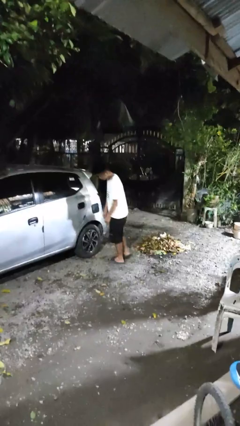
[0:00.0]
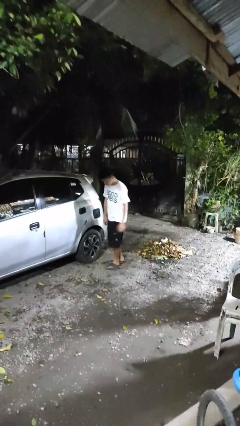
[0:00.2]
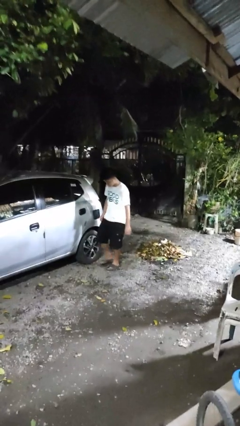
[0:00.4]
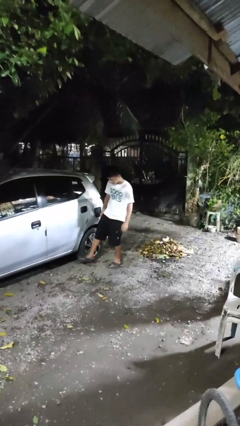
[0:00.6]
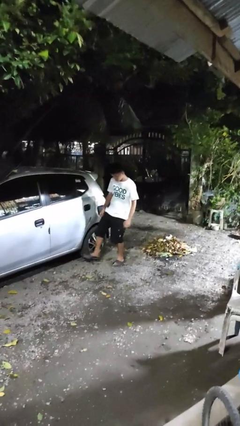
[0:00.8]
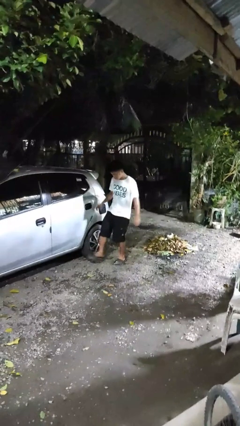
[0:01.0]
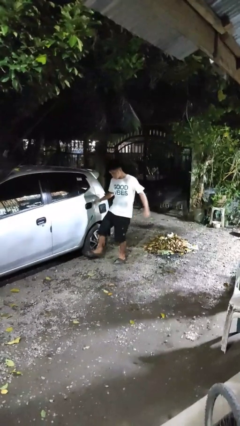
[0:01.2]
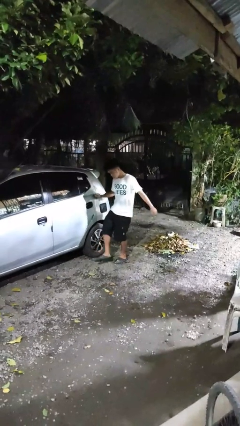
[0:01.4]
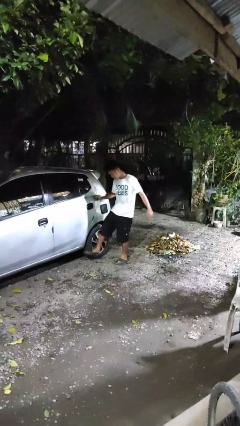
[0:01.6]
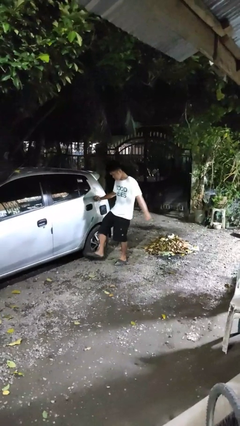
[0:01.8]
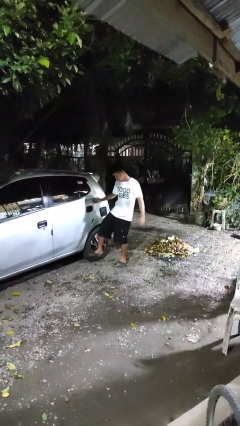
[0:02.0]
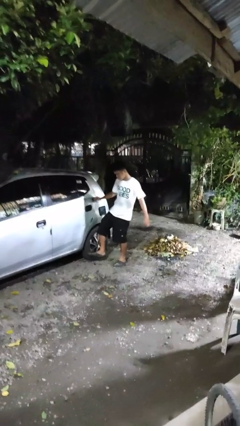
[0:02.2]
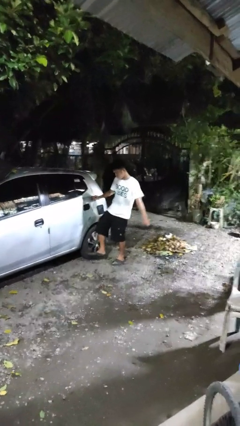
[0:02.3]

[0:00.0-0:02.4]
person kicks car tires

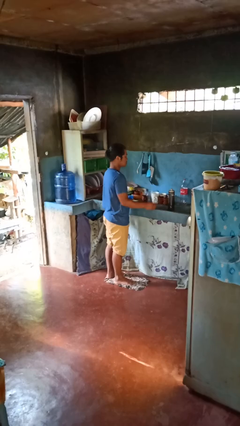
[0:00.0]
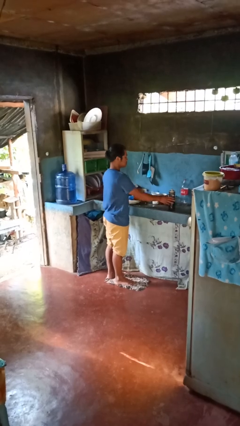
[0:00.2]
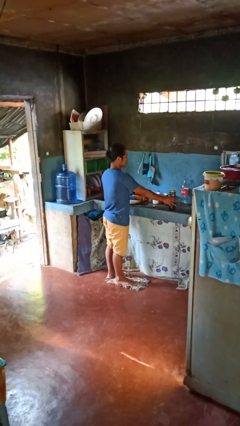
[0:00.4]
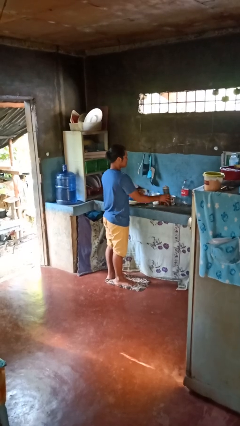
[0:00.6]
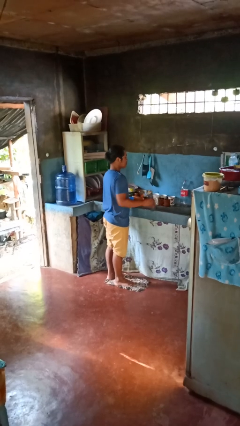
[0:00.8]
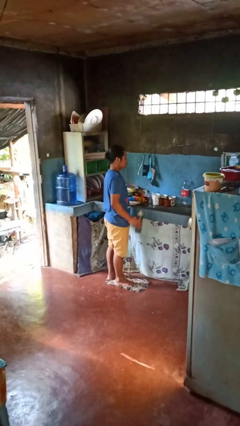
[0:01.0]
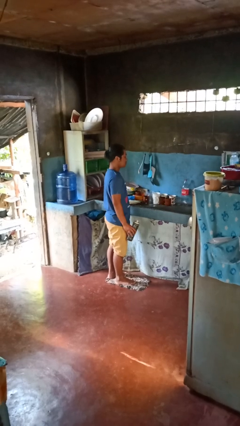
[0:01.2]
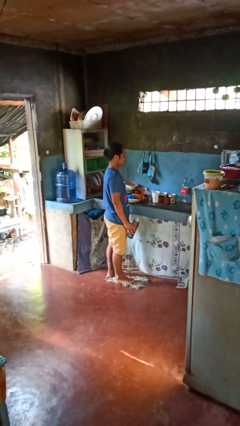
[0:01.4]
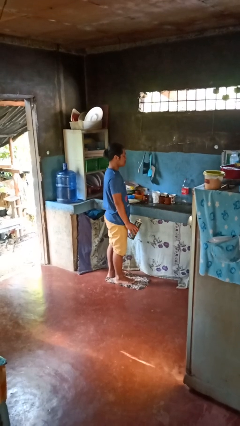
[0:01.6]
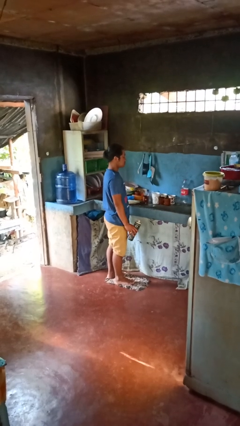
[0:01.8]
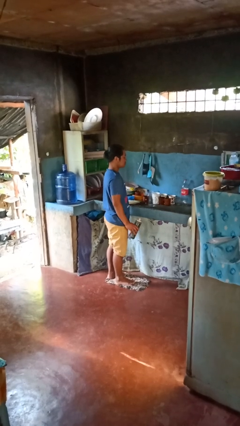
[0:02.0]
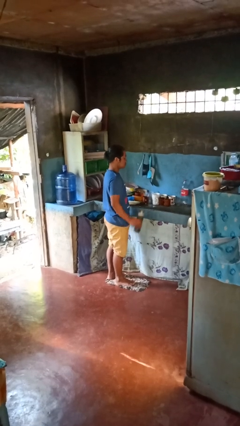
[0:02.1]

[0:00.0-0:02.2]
person picks up object from countertop

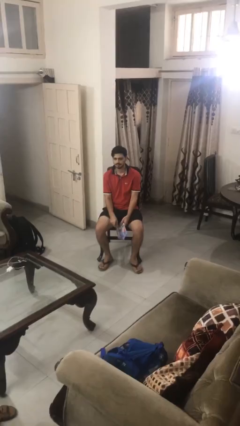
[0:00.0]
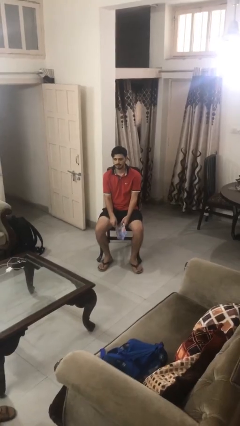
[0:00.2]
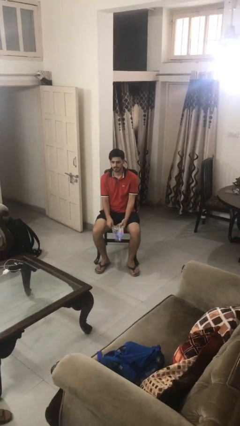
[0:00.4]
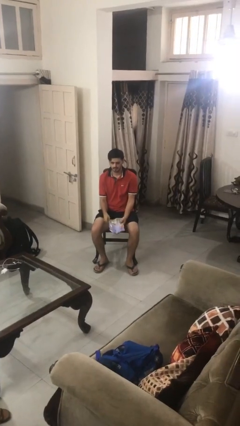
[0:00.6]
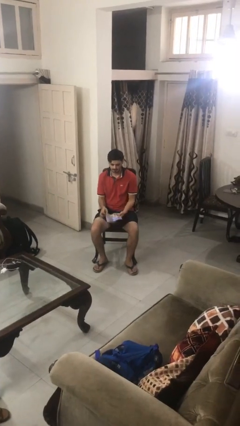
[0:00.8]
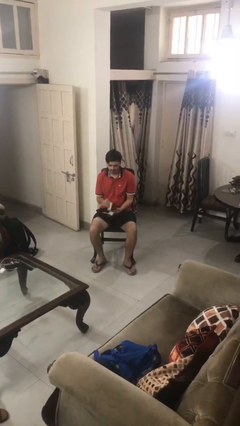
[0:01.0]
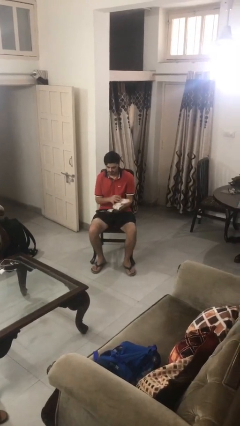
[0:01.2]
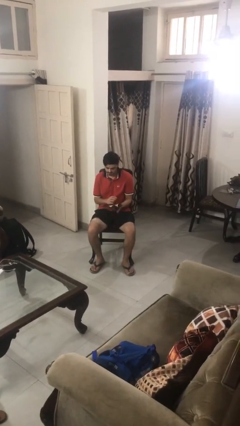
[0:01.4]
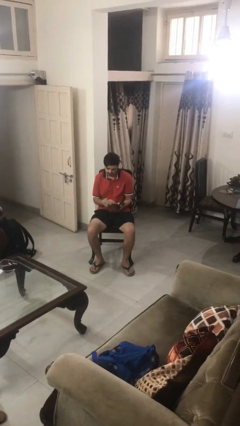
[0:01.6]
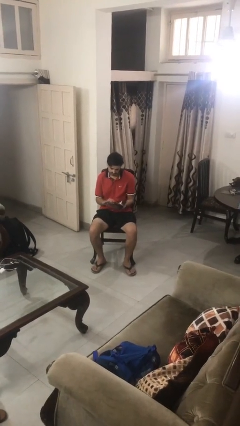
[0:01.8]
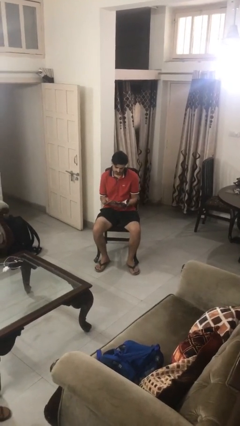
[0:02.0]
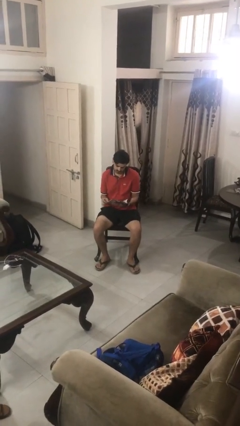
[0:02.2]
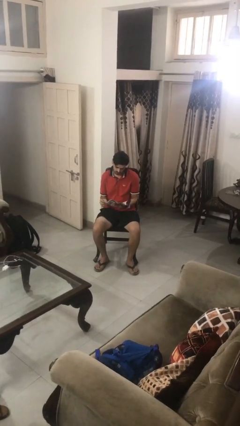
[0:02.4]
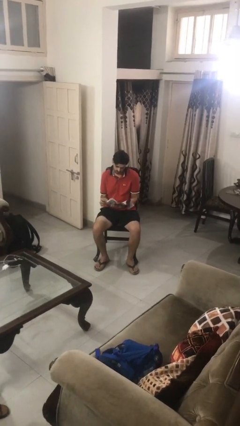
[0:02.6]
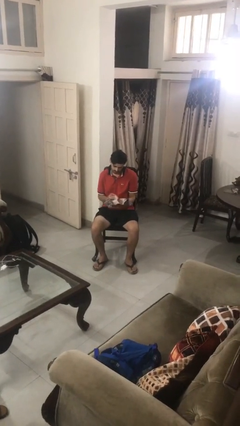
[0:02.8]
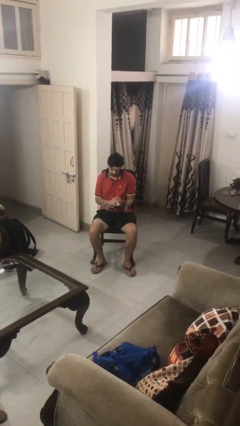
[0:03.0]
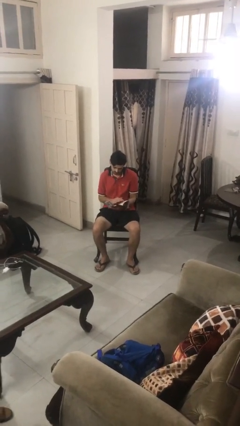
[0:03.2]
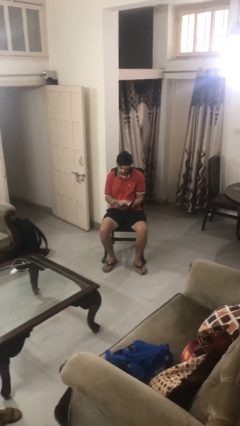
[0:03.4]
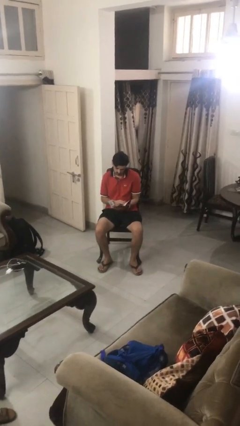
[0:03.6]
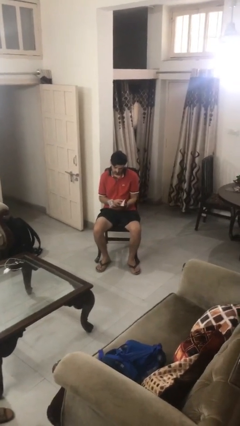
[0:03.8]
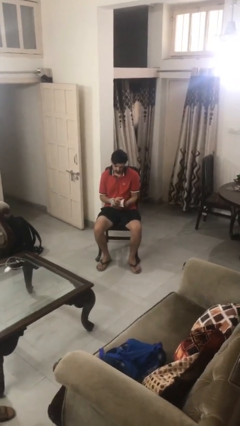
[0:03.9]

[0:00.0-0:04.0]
person reads magazine

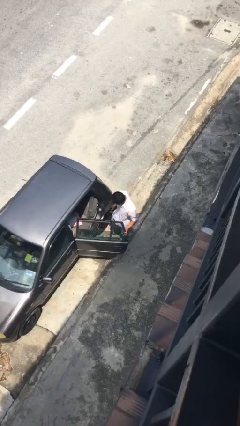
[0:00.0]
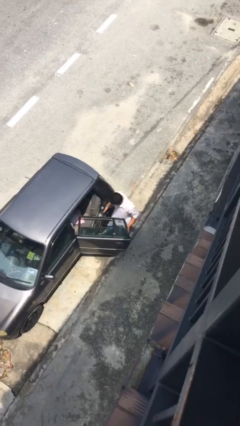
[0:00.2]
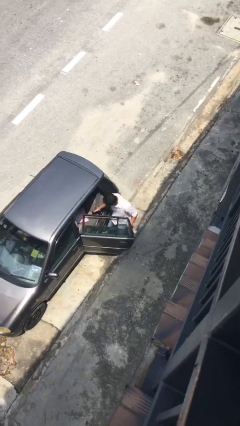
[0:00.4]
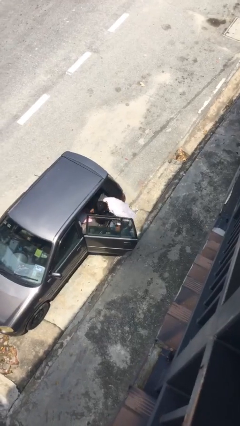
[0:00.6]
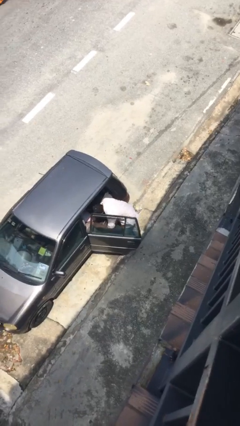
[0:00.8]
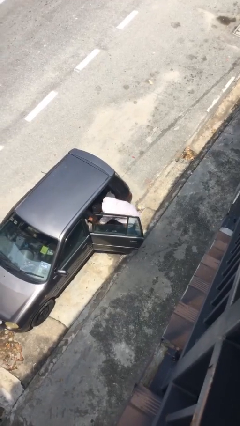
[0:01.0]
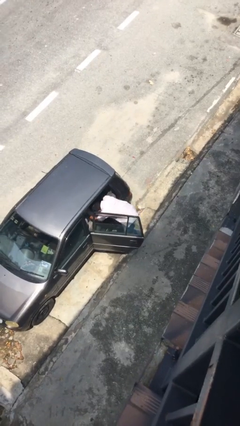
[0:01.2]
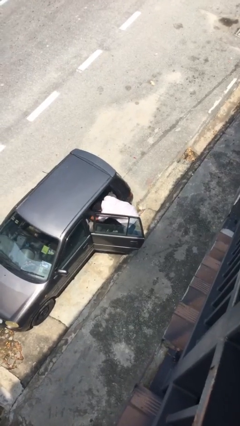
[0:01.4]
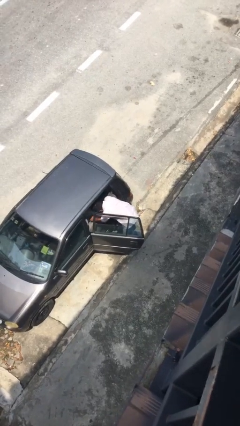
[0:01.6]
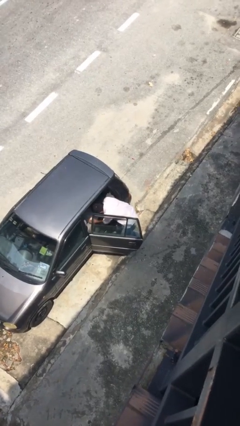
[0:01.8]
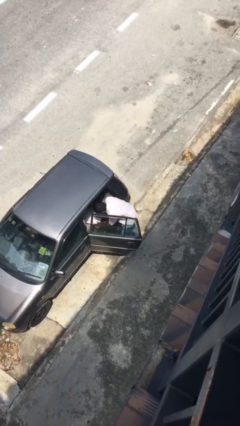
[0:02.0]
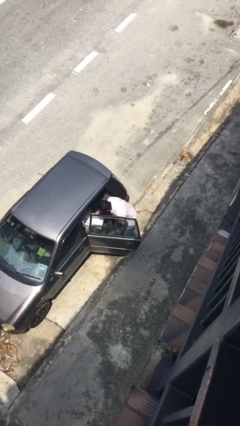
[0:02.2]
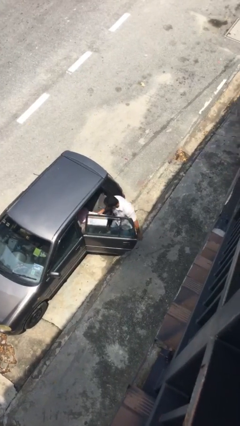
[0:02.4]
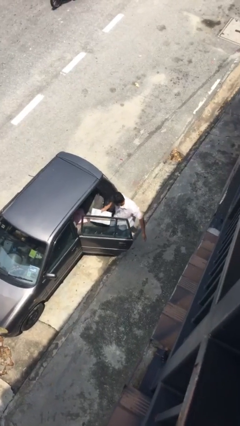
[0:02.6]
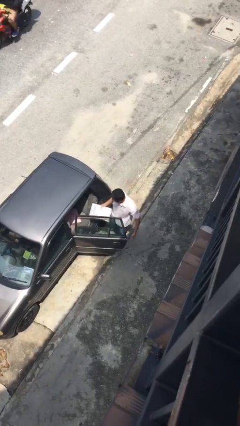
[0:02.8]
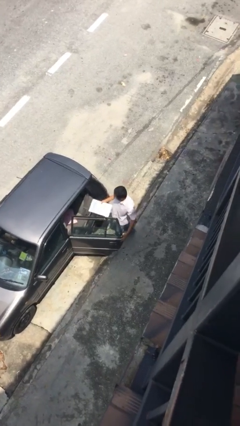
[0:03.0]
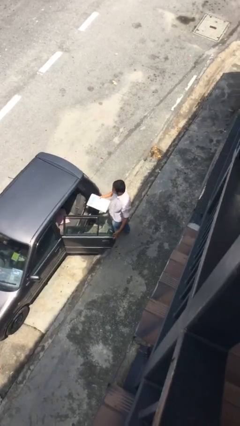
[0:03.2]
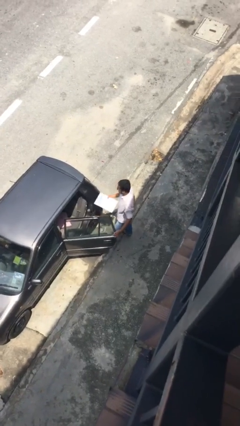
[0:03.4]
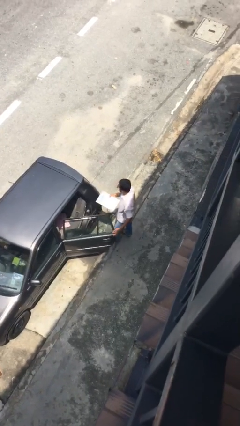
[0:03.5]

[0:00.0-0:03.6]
person unloads car

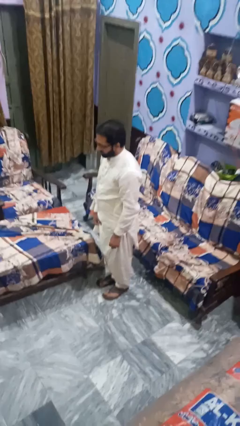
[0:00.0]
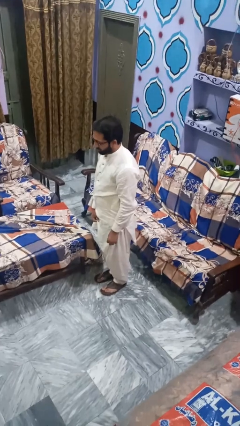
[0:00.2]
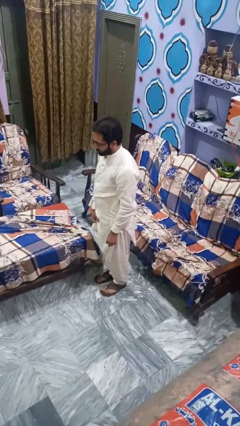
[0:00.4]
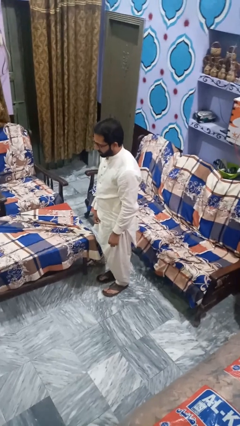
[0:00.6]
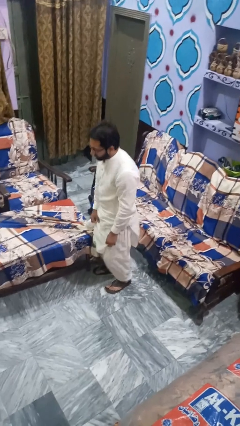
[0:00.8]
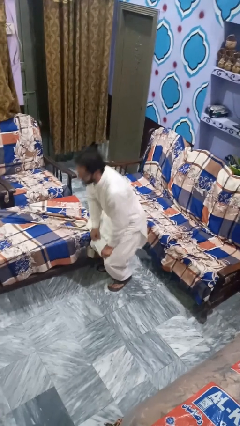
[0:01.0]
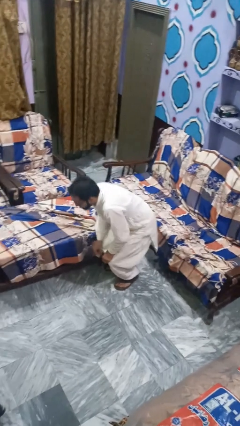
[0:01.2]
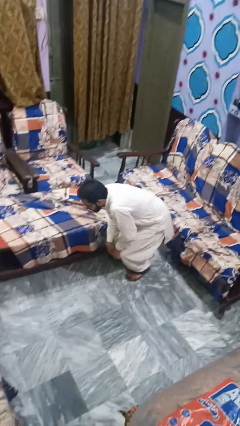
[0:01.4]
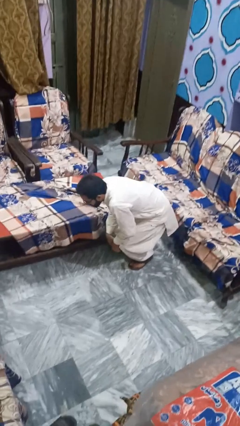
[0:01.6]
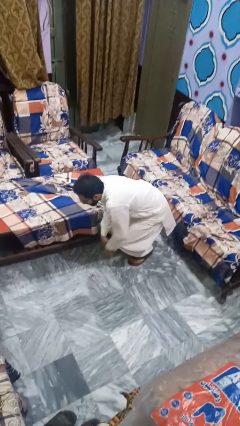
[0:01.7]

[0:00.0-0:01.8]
person trips on object on floor

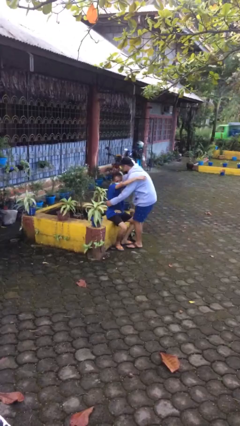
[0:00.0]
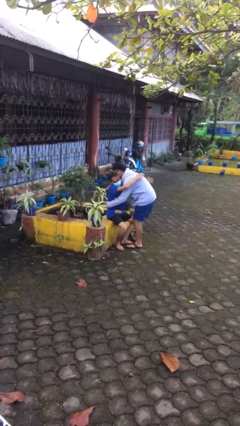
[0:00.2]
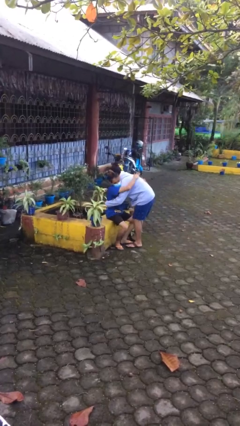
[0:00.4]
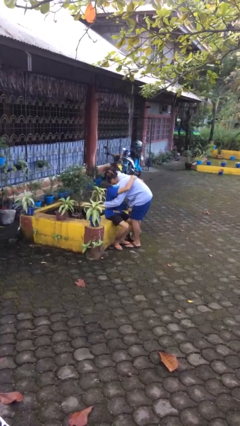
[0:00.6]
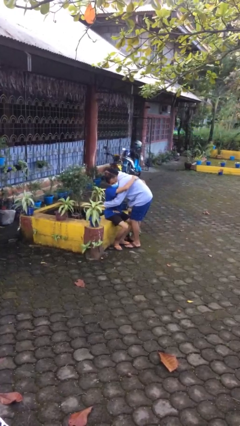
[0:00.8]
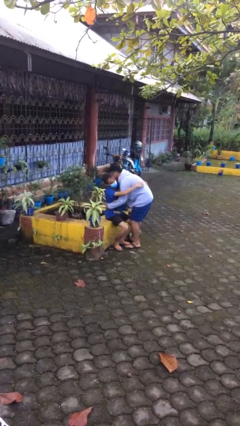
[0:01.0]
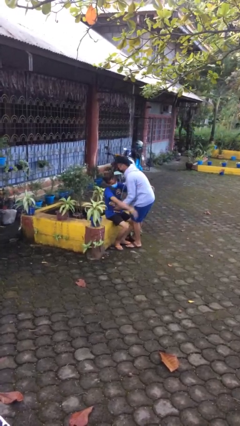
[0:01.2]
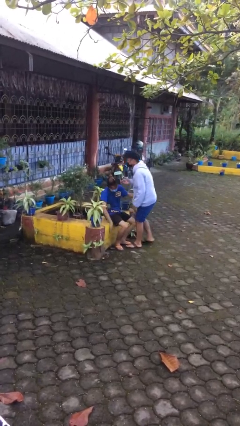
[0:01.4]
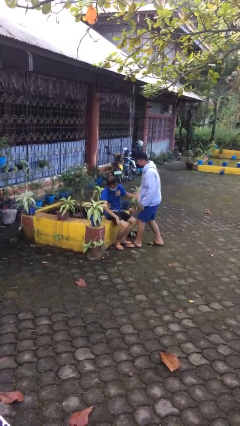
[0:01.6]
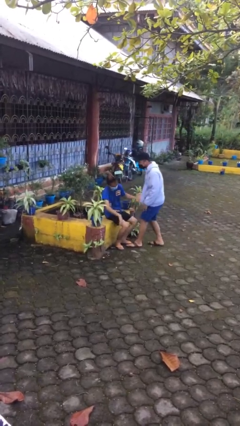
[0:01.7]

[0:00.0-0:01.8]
person embraces person

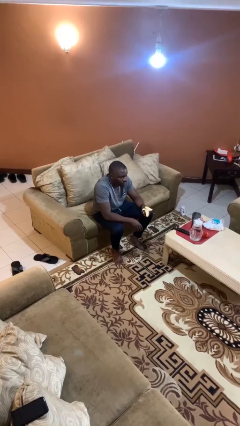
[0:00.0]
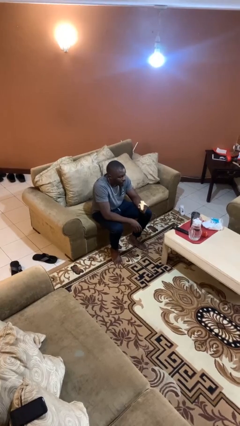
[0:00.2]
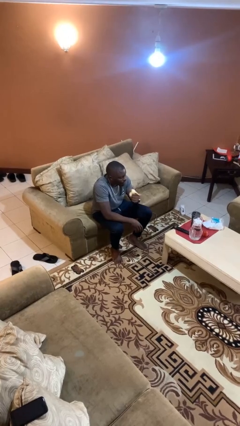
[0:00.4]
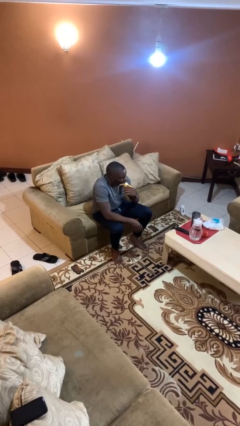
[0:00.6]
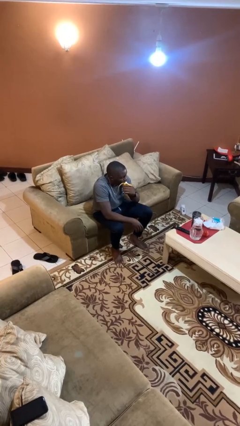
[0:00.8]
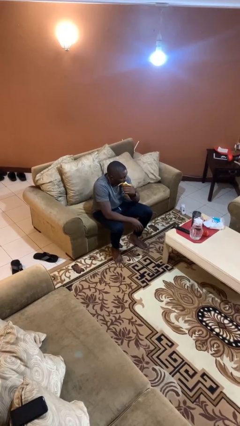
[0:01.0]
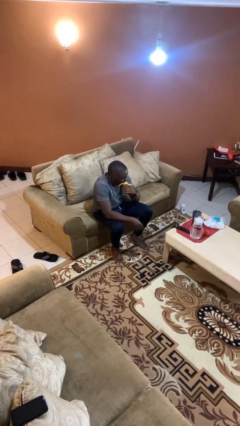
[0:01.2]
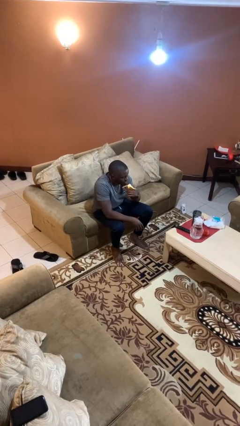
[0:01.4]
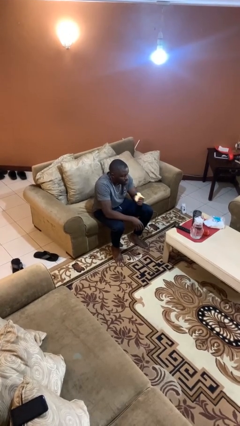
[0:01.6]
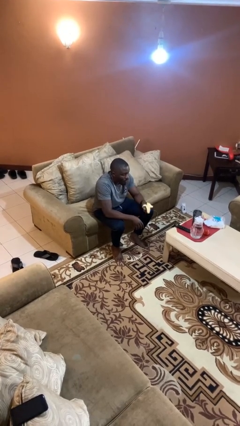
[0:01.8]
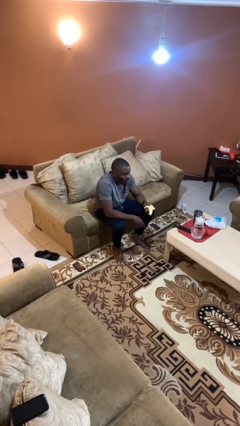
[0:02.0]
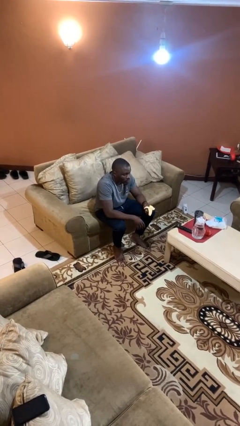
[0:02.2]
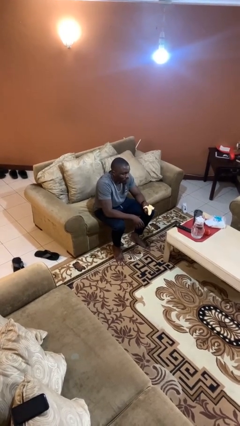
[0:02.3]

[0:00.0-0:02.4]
person eats banana
